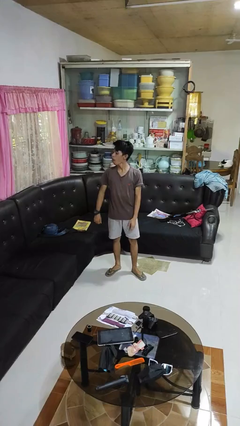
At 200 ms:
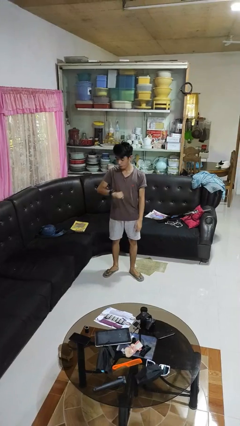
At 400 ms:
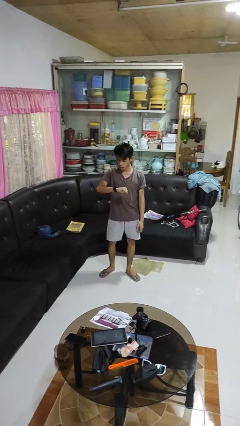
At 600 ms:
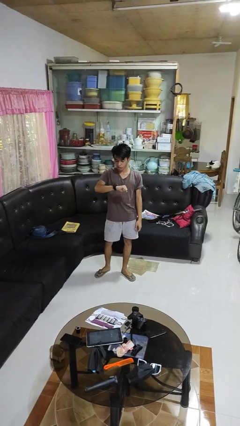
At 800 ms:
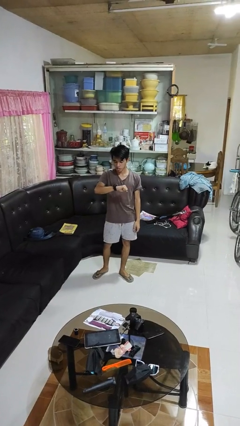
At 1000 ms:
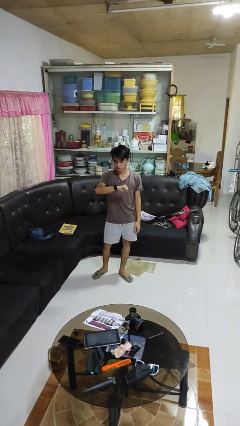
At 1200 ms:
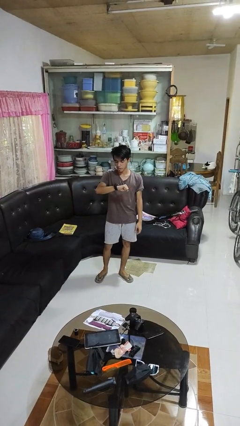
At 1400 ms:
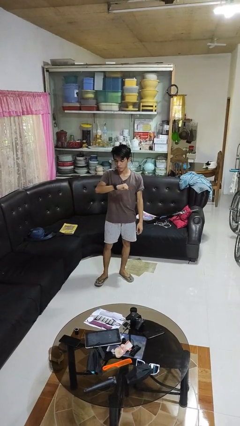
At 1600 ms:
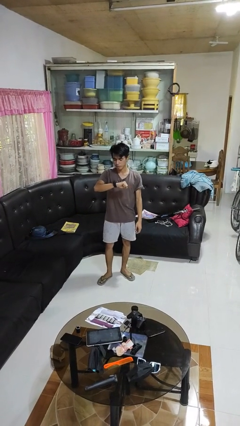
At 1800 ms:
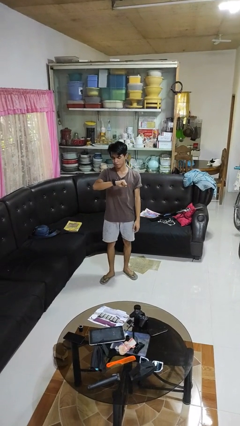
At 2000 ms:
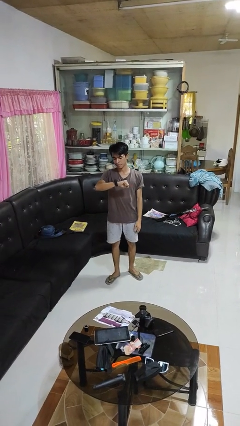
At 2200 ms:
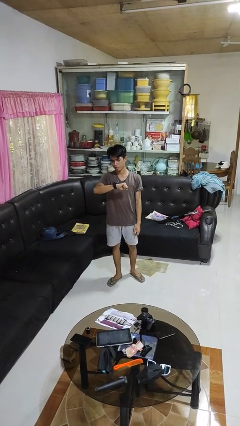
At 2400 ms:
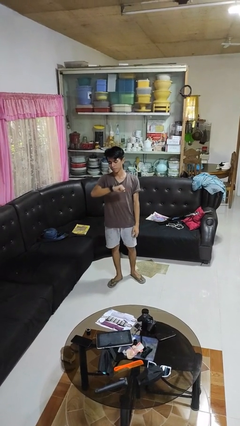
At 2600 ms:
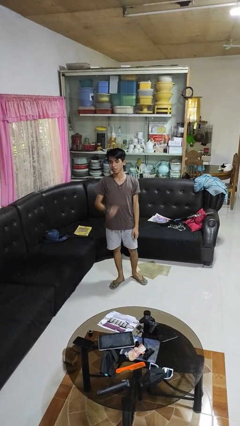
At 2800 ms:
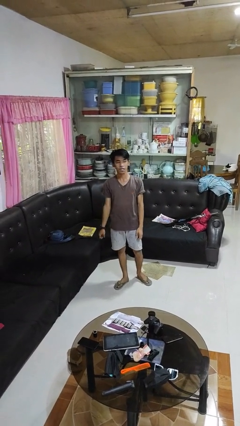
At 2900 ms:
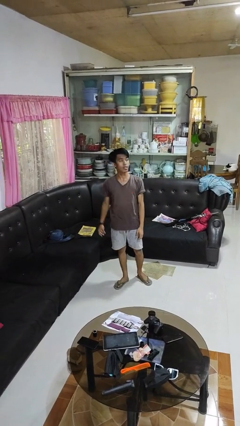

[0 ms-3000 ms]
person looks at wristwatch

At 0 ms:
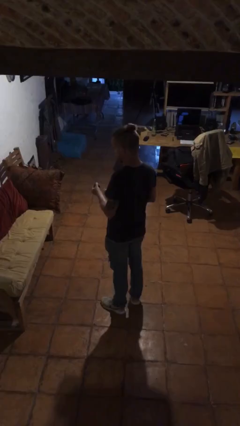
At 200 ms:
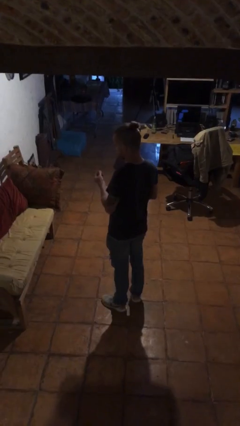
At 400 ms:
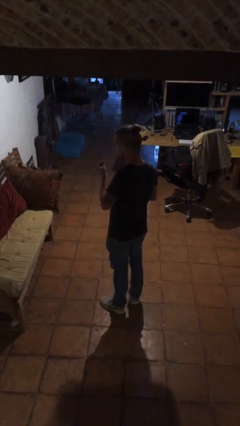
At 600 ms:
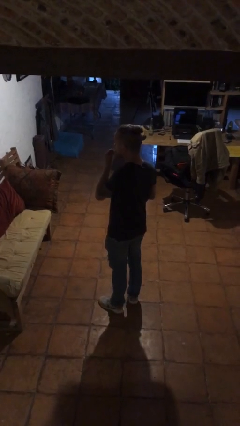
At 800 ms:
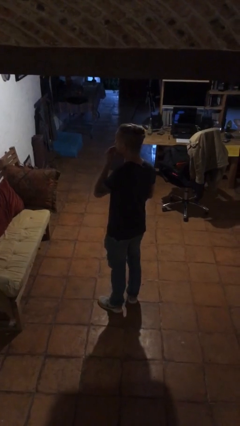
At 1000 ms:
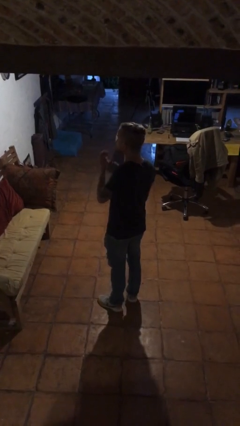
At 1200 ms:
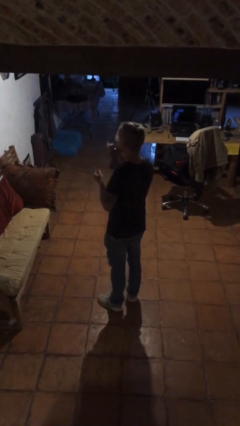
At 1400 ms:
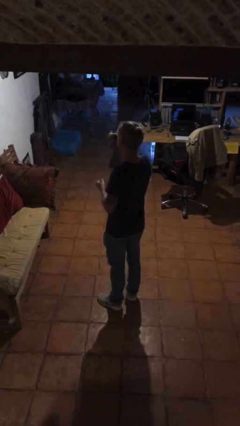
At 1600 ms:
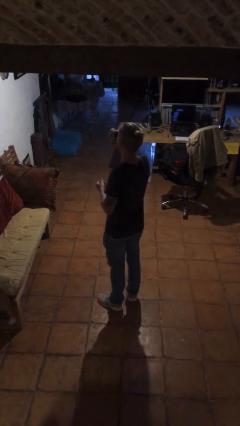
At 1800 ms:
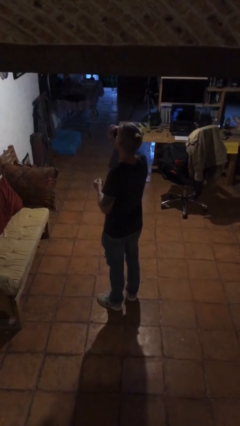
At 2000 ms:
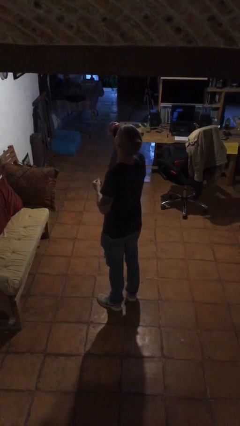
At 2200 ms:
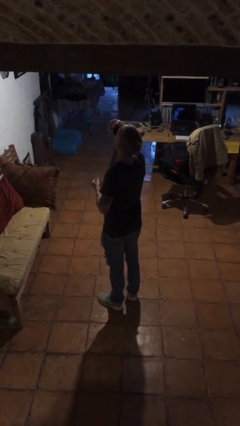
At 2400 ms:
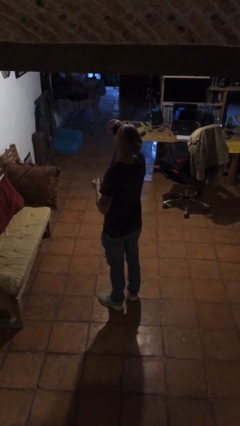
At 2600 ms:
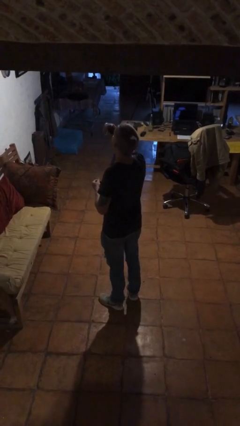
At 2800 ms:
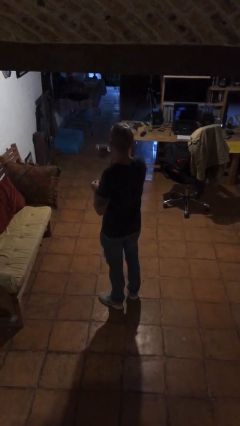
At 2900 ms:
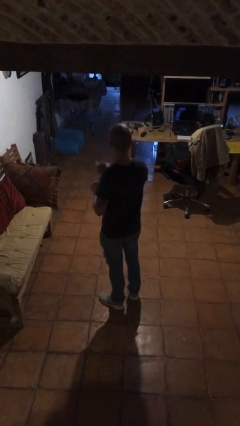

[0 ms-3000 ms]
person drinks from cup

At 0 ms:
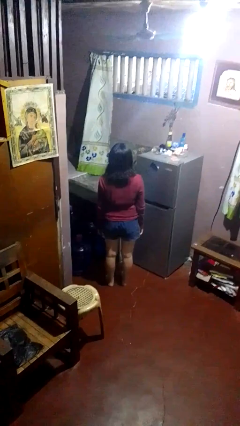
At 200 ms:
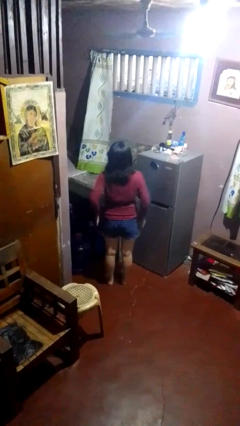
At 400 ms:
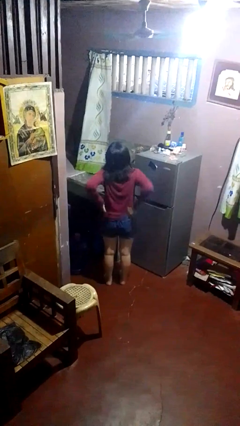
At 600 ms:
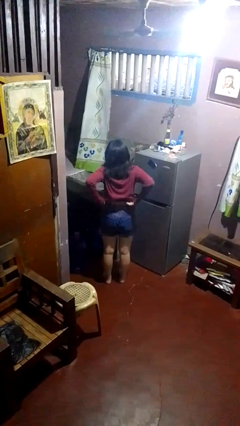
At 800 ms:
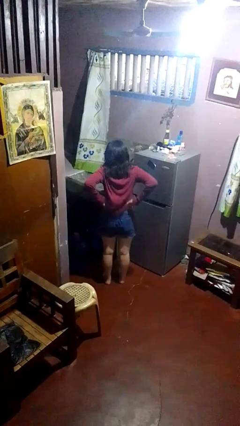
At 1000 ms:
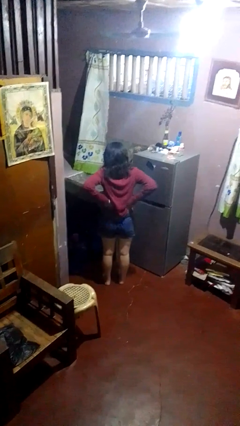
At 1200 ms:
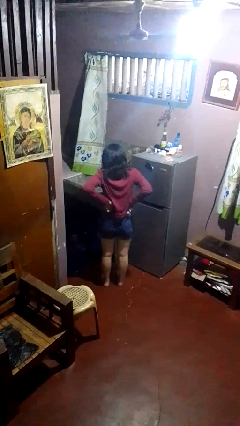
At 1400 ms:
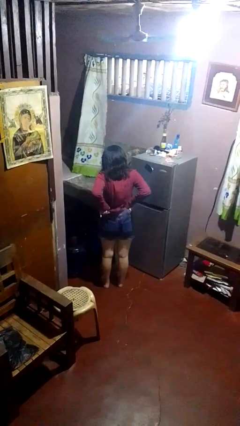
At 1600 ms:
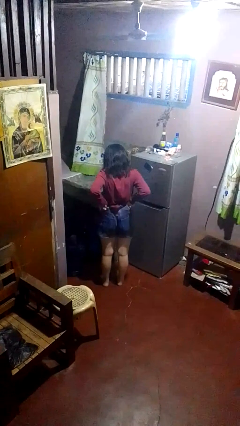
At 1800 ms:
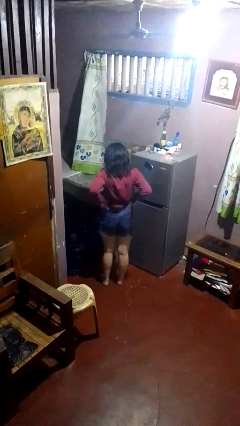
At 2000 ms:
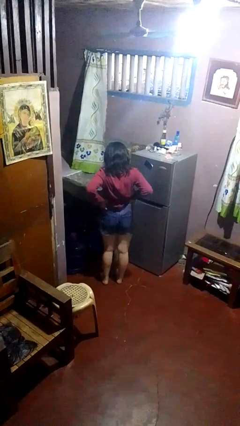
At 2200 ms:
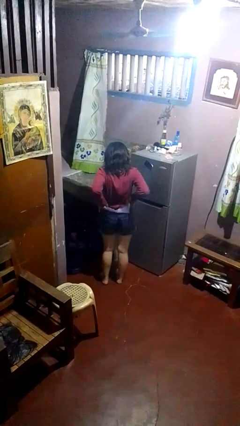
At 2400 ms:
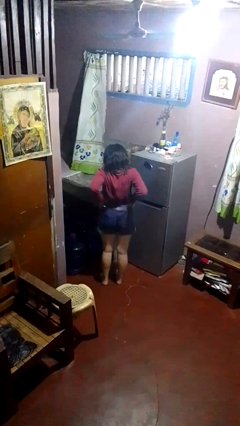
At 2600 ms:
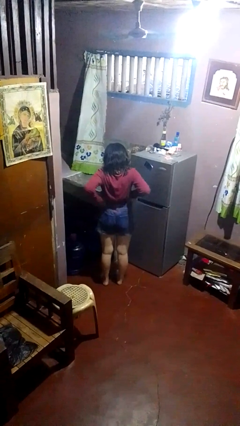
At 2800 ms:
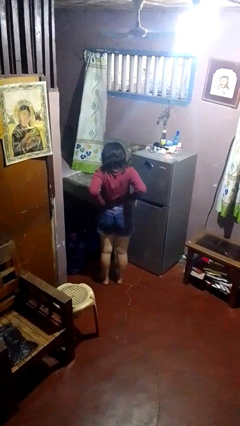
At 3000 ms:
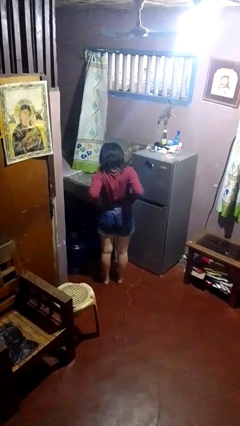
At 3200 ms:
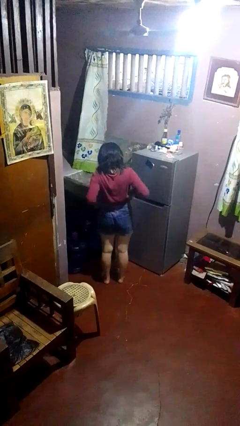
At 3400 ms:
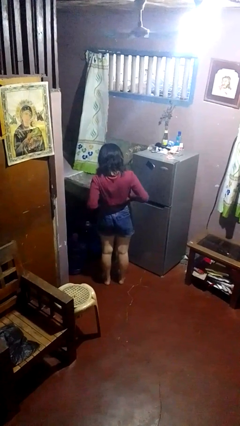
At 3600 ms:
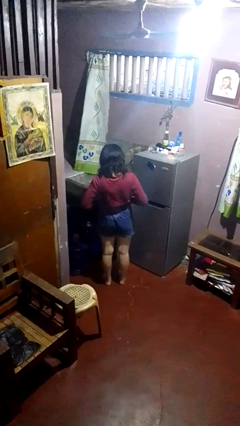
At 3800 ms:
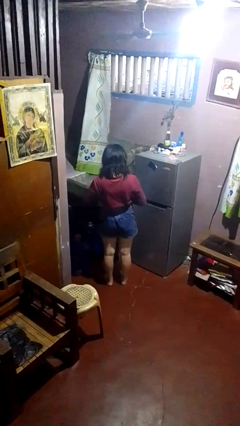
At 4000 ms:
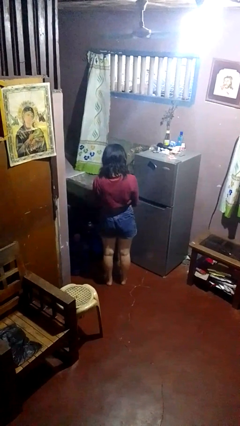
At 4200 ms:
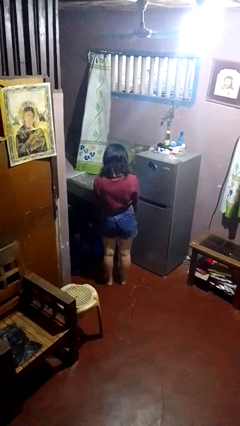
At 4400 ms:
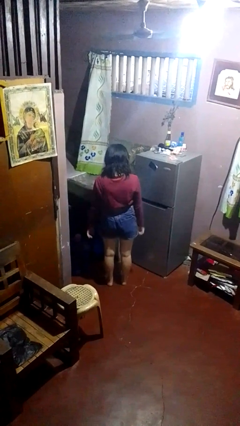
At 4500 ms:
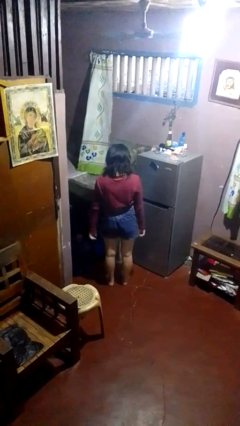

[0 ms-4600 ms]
person tucks in shirt

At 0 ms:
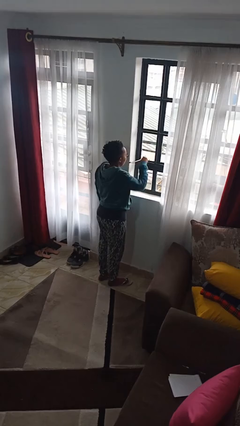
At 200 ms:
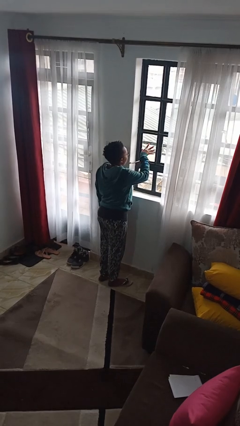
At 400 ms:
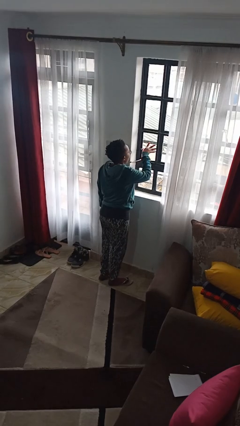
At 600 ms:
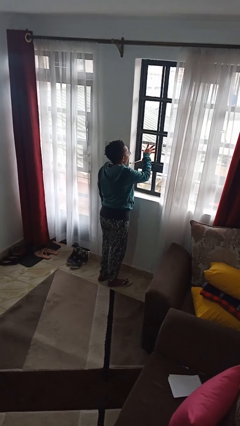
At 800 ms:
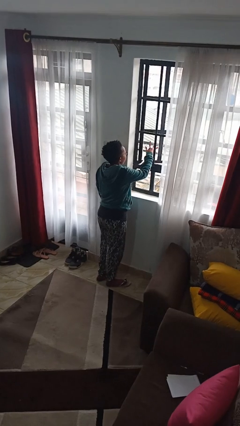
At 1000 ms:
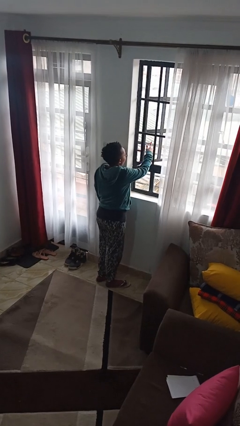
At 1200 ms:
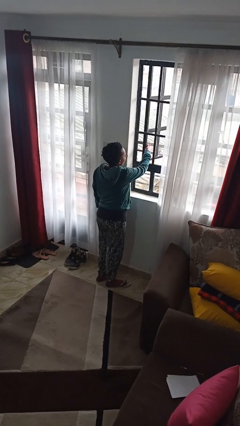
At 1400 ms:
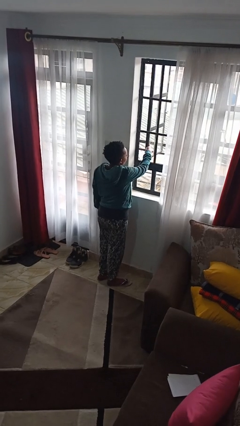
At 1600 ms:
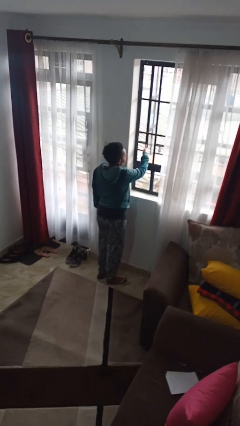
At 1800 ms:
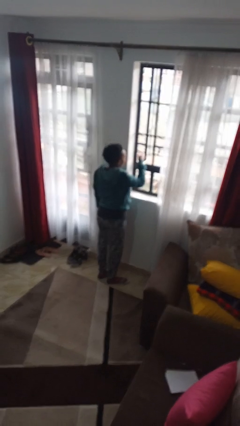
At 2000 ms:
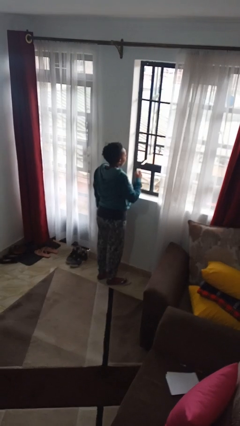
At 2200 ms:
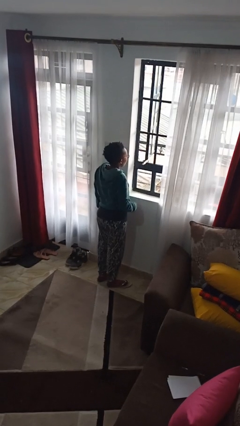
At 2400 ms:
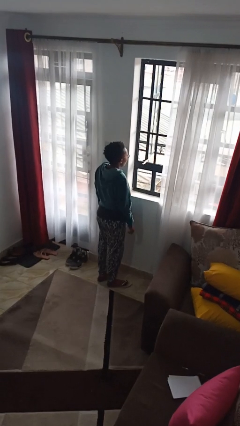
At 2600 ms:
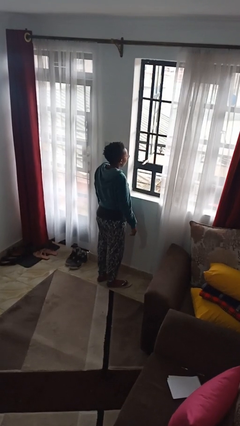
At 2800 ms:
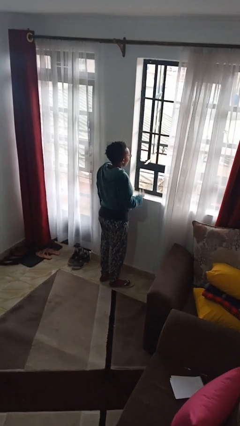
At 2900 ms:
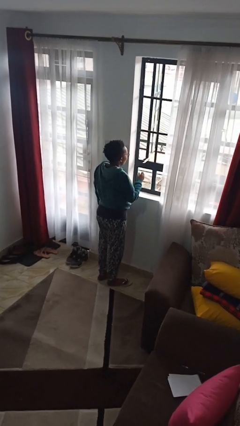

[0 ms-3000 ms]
person opens home window

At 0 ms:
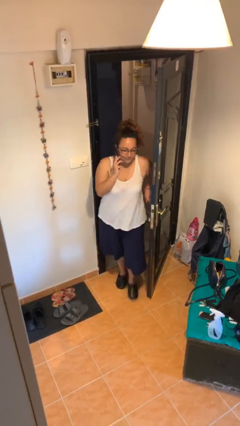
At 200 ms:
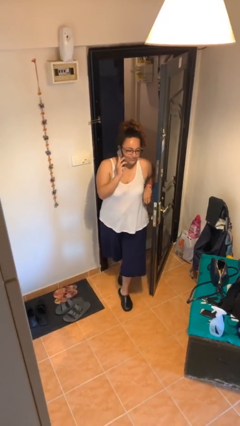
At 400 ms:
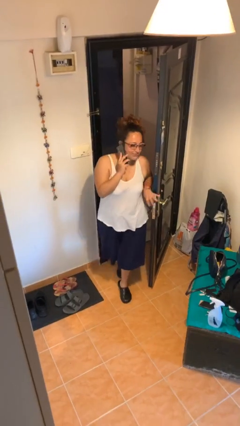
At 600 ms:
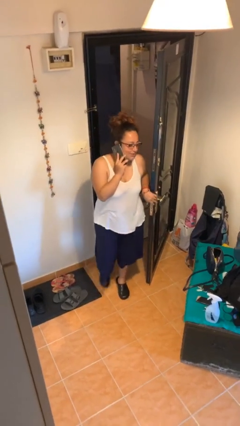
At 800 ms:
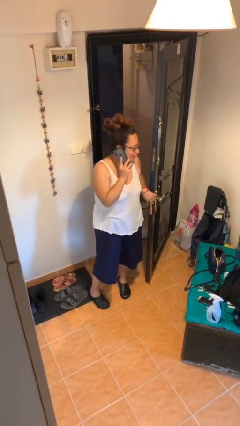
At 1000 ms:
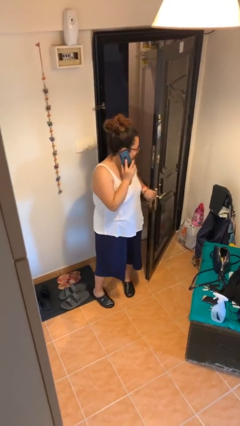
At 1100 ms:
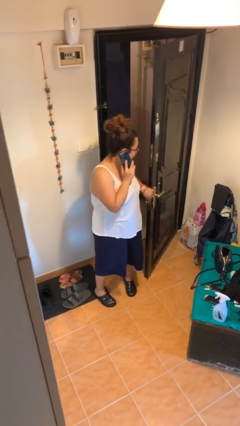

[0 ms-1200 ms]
person enters scene through structure

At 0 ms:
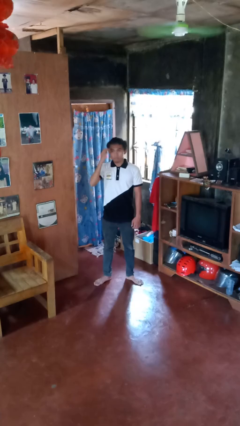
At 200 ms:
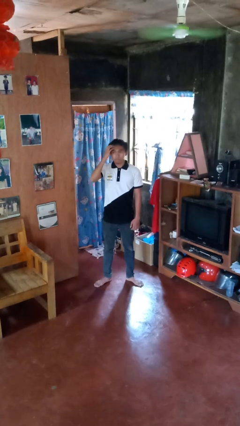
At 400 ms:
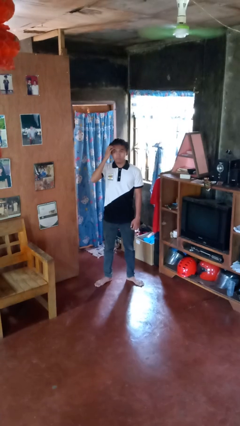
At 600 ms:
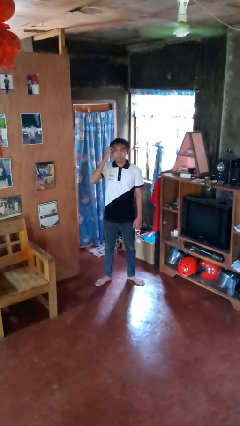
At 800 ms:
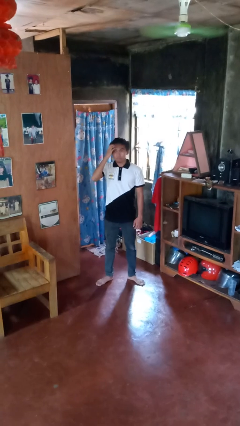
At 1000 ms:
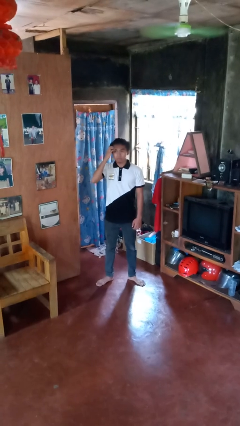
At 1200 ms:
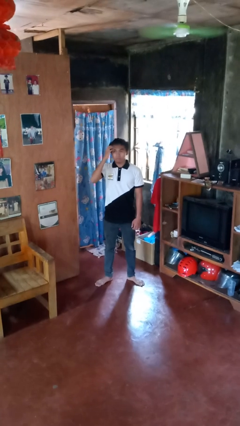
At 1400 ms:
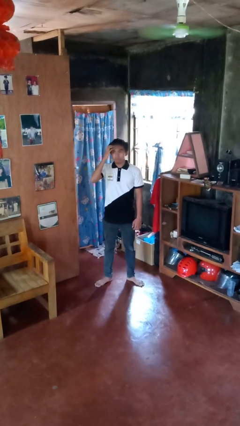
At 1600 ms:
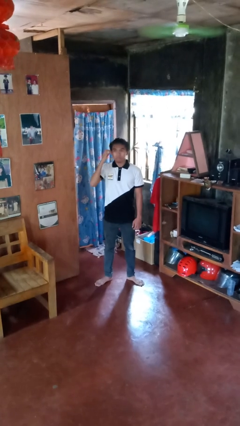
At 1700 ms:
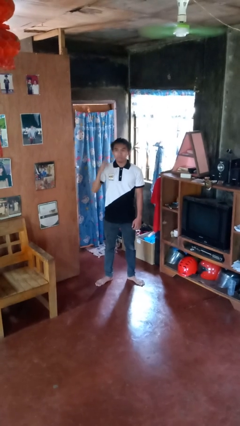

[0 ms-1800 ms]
person scratches face

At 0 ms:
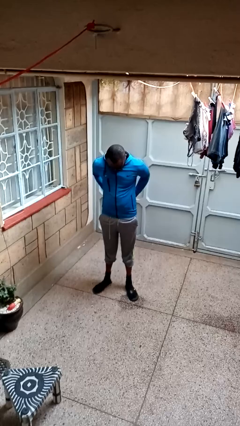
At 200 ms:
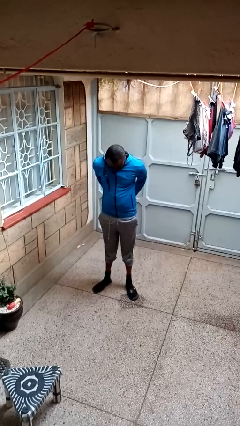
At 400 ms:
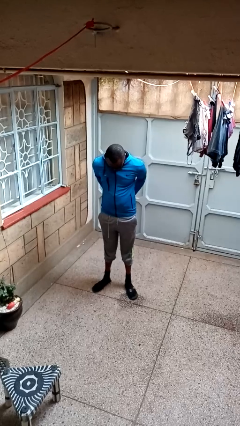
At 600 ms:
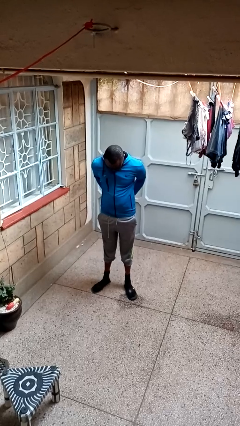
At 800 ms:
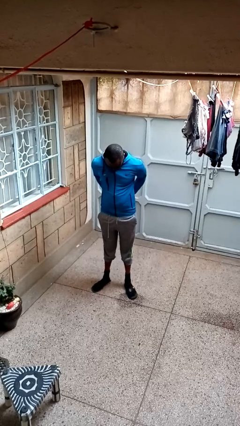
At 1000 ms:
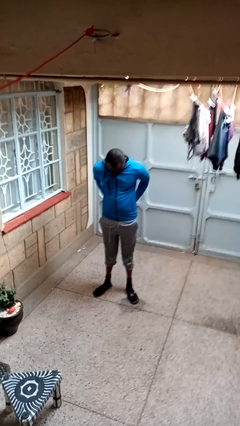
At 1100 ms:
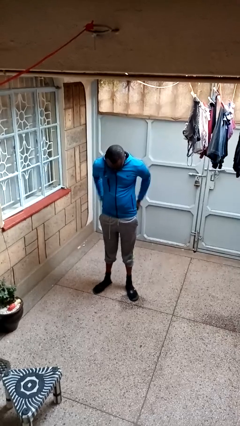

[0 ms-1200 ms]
person puts hands in back pockets
